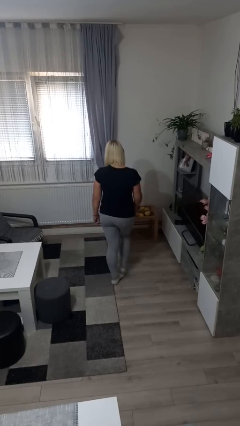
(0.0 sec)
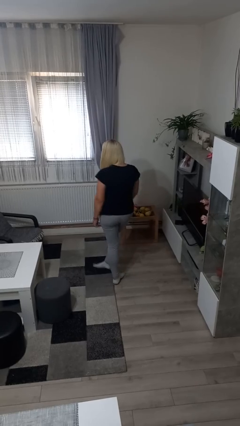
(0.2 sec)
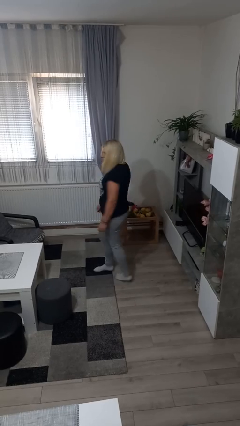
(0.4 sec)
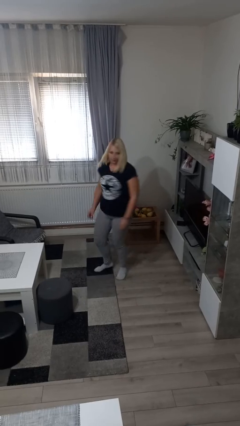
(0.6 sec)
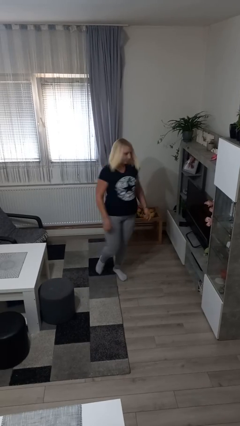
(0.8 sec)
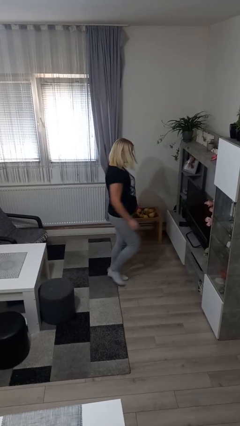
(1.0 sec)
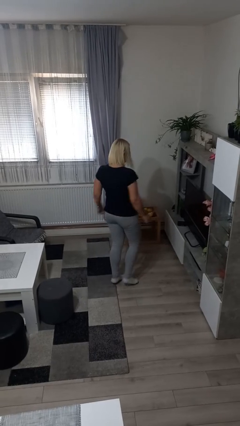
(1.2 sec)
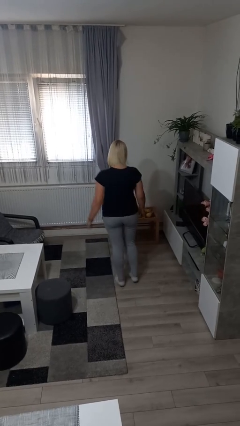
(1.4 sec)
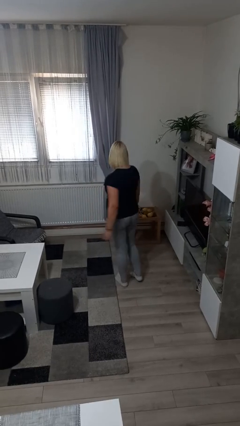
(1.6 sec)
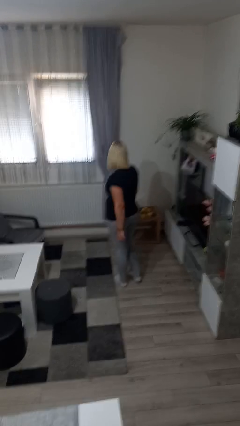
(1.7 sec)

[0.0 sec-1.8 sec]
person twirls

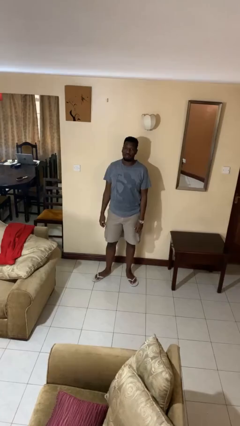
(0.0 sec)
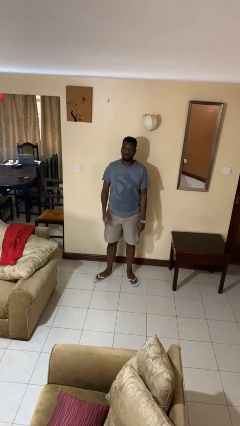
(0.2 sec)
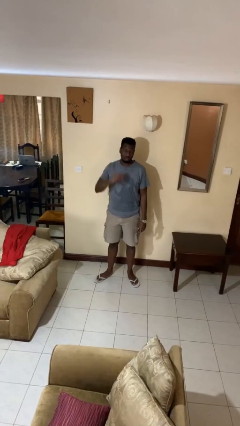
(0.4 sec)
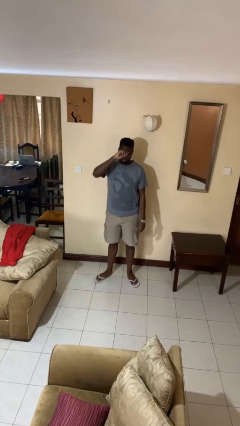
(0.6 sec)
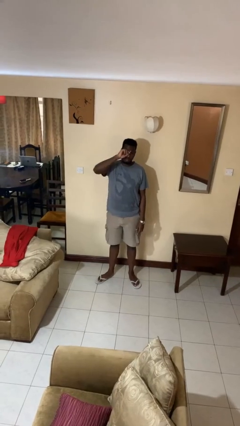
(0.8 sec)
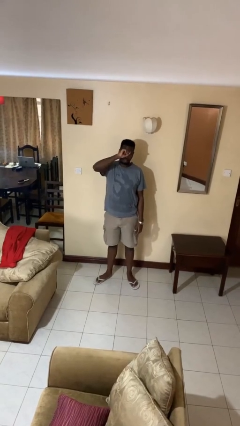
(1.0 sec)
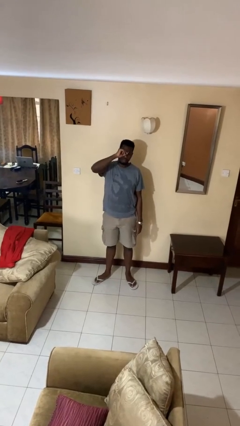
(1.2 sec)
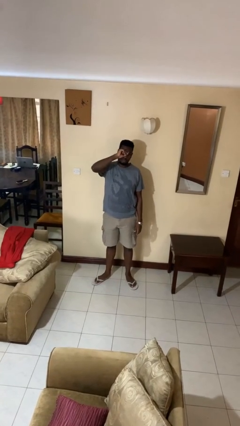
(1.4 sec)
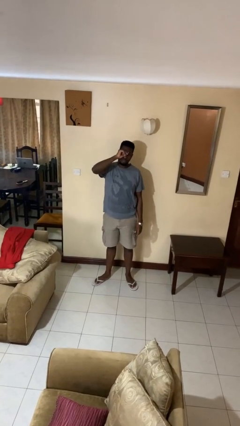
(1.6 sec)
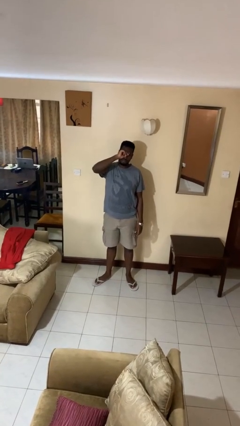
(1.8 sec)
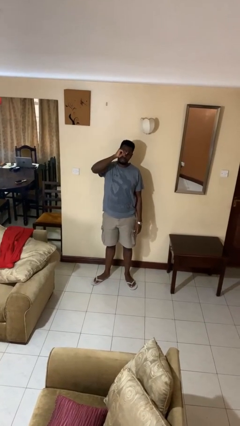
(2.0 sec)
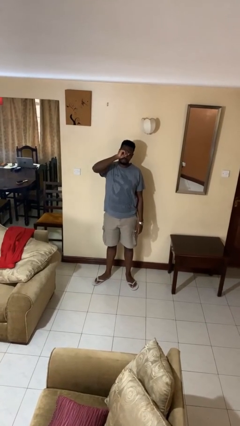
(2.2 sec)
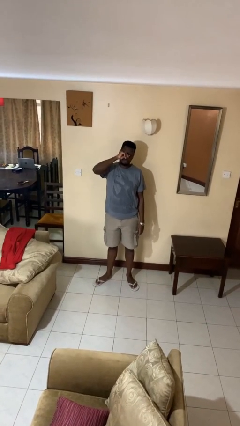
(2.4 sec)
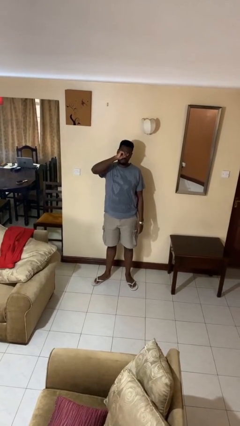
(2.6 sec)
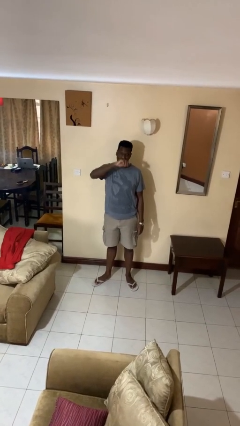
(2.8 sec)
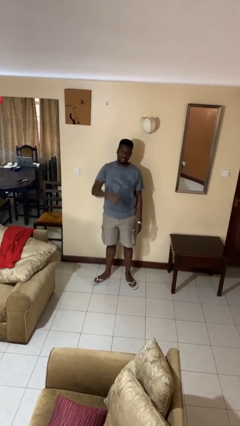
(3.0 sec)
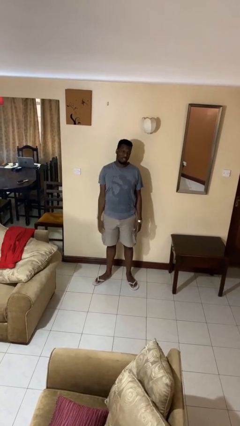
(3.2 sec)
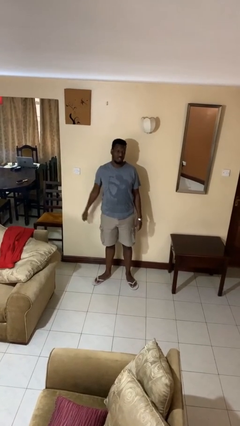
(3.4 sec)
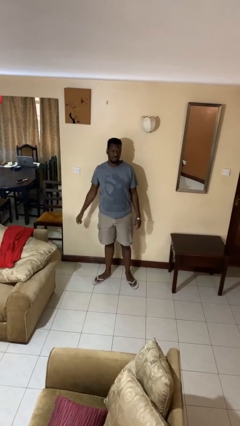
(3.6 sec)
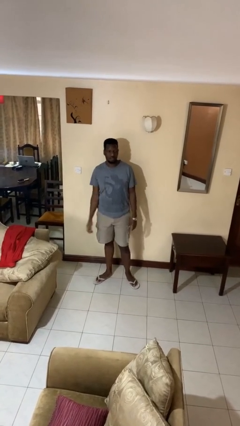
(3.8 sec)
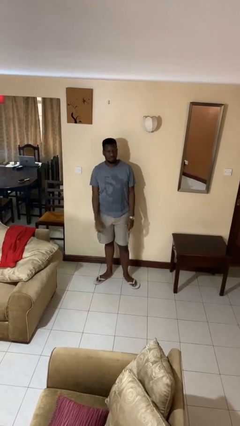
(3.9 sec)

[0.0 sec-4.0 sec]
person rubs eyes

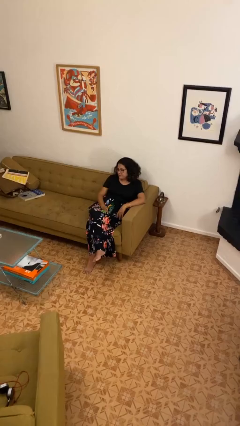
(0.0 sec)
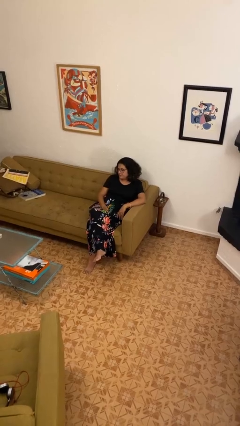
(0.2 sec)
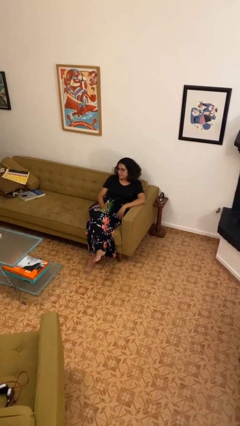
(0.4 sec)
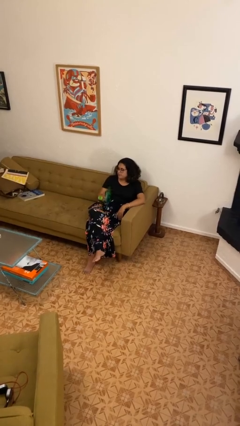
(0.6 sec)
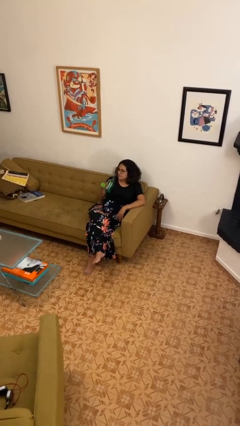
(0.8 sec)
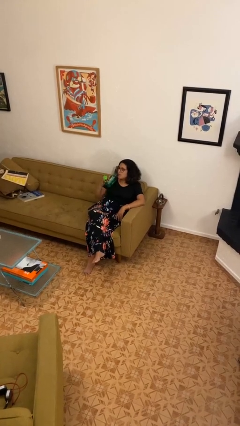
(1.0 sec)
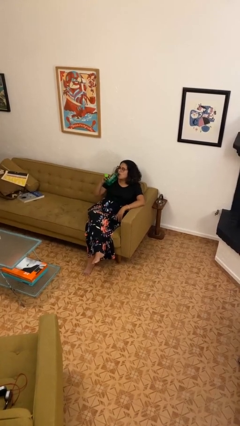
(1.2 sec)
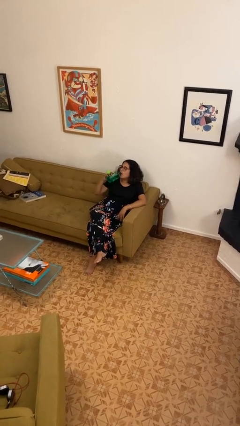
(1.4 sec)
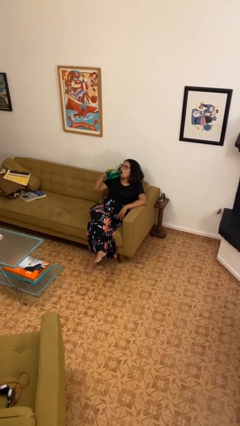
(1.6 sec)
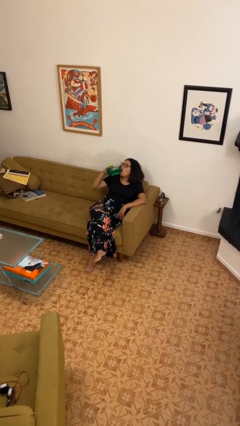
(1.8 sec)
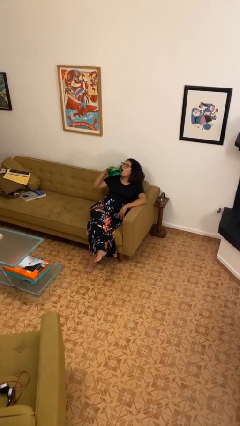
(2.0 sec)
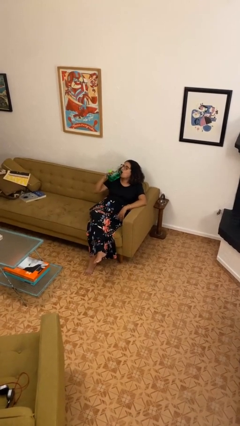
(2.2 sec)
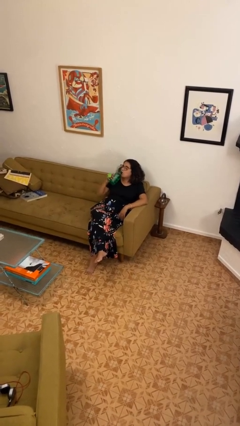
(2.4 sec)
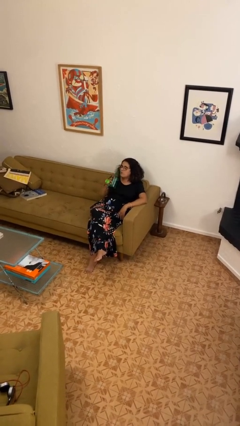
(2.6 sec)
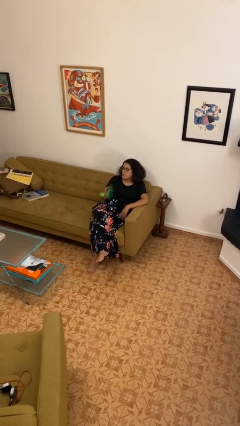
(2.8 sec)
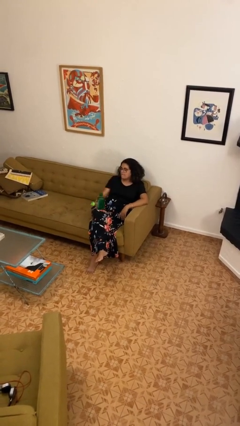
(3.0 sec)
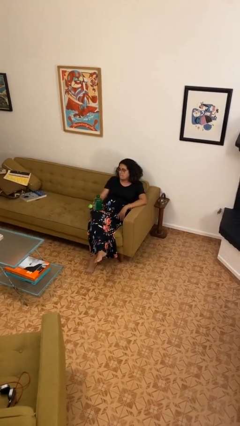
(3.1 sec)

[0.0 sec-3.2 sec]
person drinks from bottle

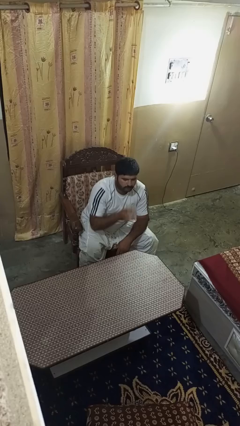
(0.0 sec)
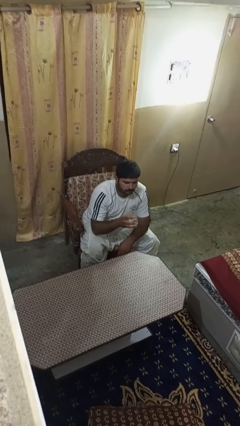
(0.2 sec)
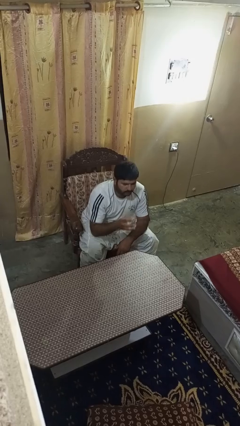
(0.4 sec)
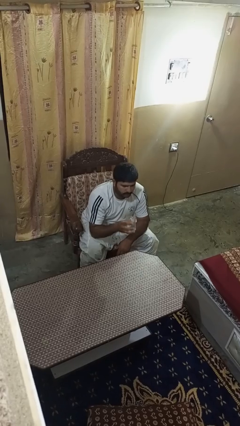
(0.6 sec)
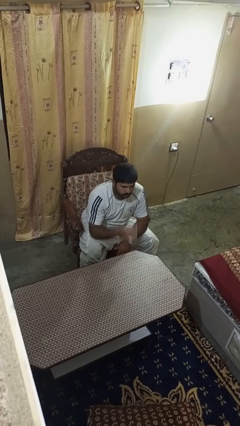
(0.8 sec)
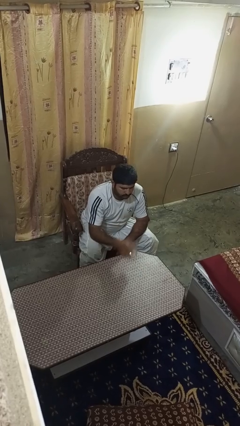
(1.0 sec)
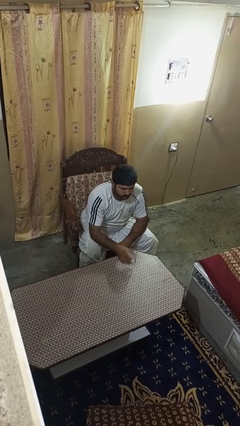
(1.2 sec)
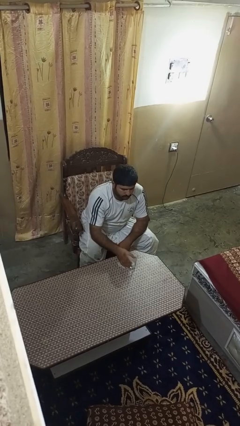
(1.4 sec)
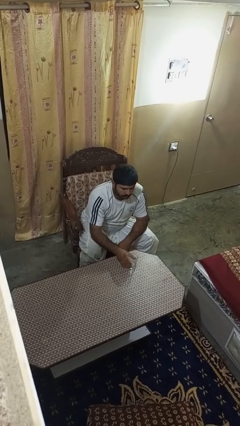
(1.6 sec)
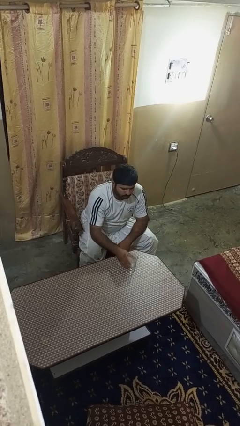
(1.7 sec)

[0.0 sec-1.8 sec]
person puts down object on table

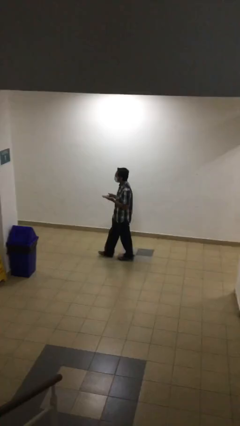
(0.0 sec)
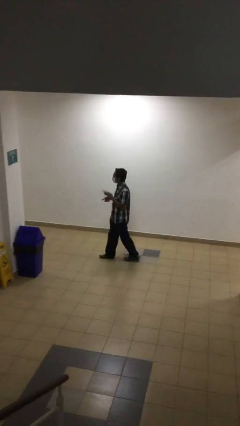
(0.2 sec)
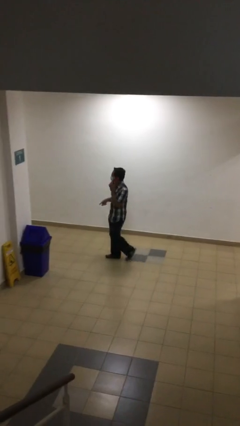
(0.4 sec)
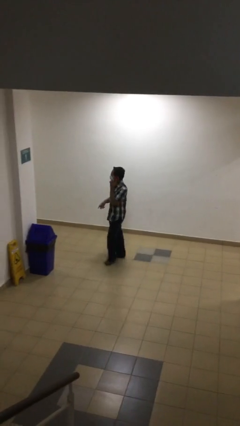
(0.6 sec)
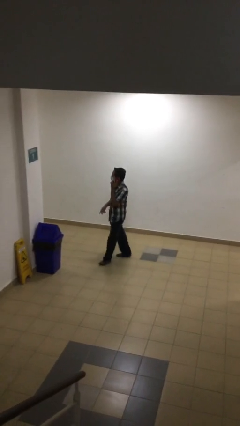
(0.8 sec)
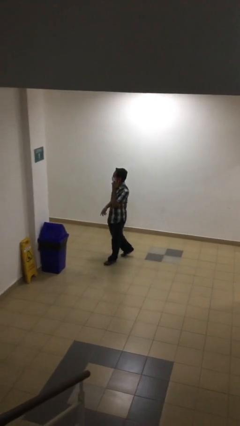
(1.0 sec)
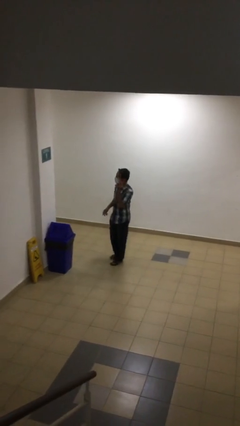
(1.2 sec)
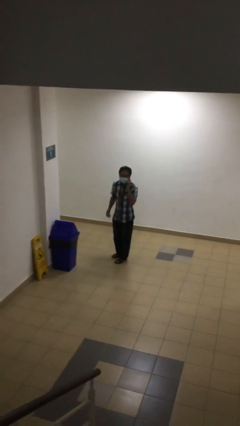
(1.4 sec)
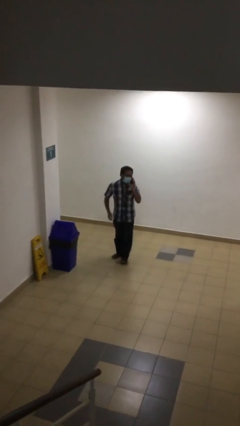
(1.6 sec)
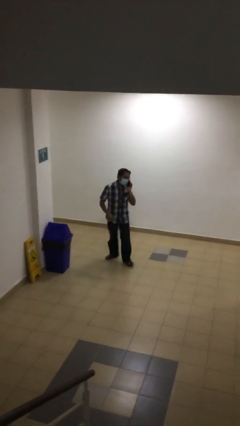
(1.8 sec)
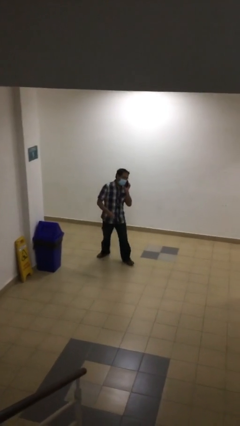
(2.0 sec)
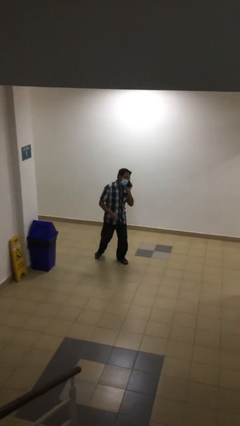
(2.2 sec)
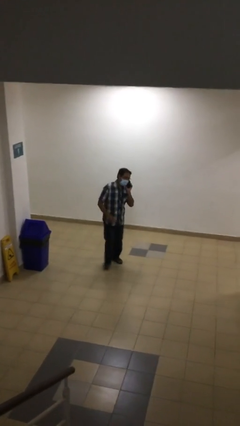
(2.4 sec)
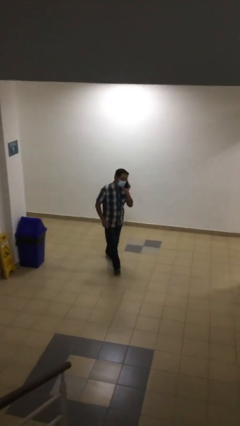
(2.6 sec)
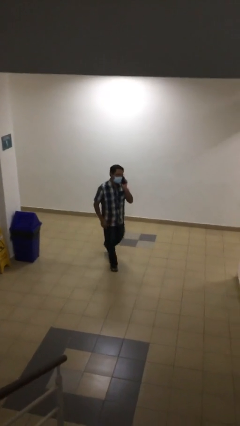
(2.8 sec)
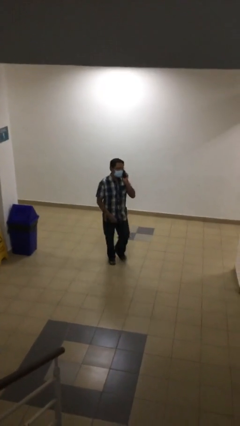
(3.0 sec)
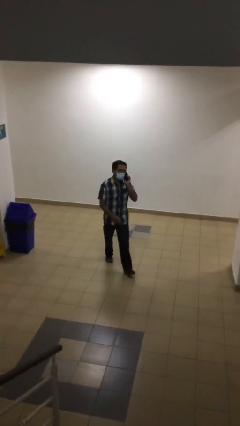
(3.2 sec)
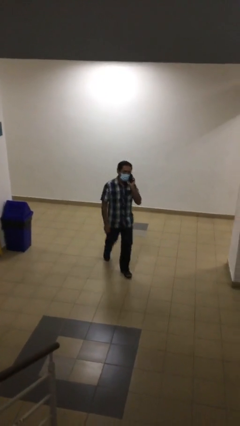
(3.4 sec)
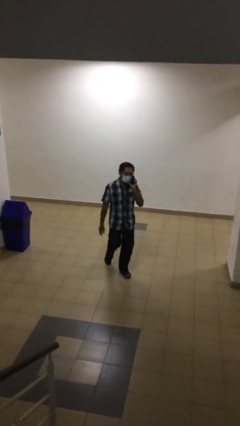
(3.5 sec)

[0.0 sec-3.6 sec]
person talks on phone

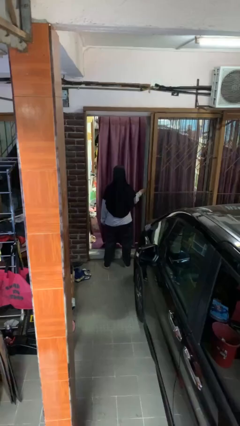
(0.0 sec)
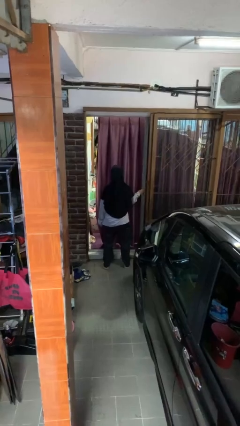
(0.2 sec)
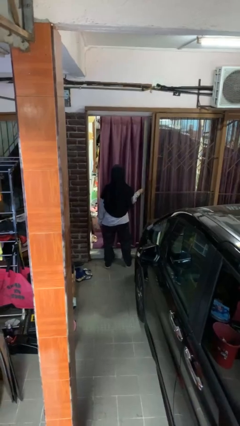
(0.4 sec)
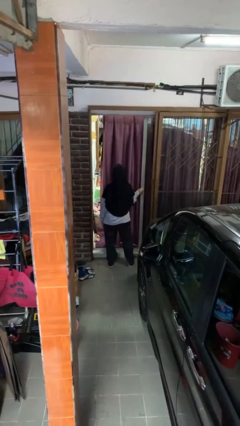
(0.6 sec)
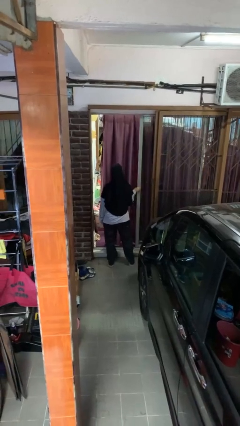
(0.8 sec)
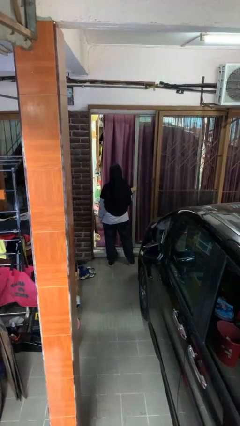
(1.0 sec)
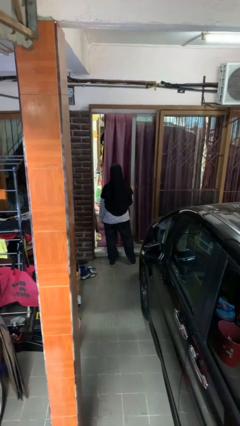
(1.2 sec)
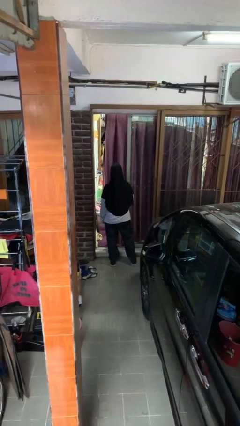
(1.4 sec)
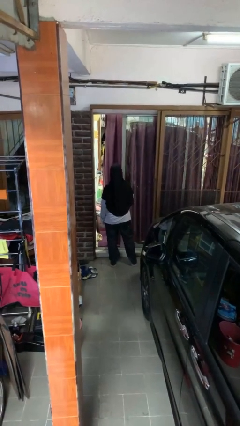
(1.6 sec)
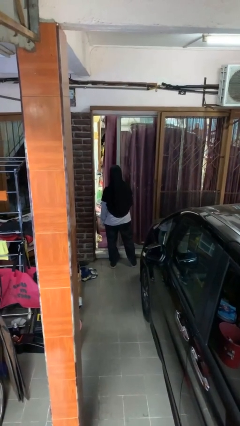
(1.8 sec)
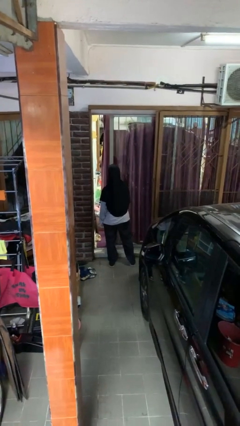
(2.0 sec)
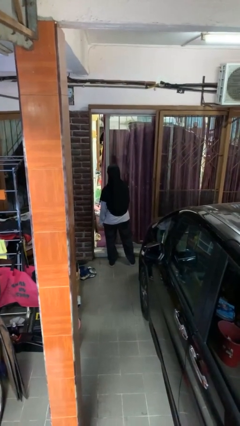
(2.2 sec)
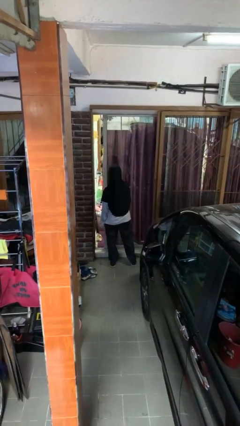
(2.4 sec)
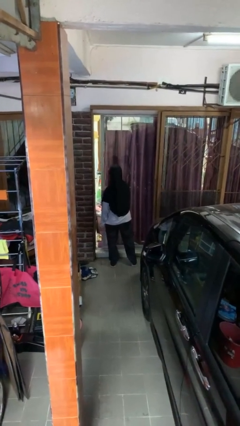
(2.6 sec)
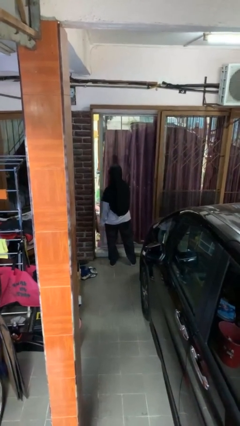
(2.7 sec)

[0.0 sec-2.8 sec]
person closes sliding door
